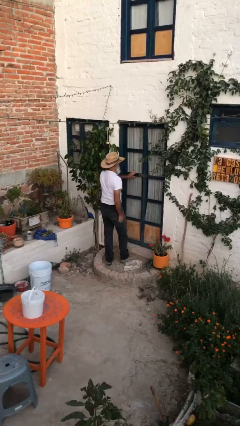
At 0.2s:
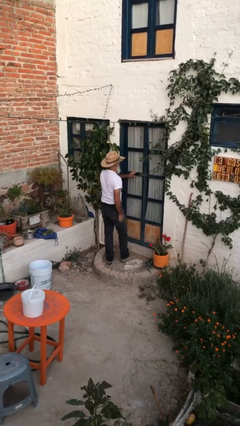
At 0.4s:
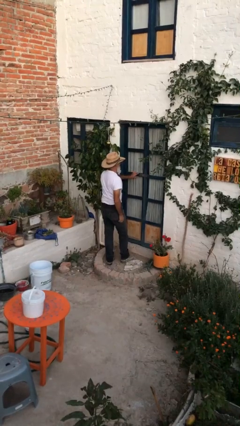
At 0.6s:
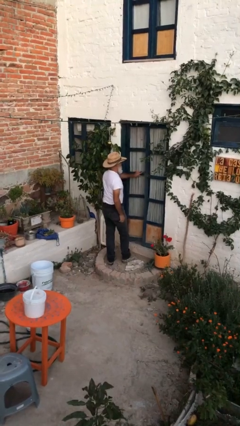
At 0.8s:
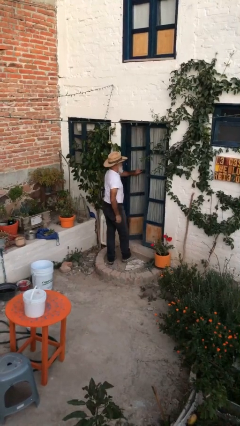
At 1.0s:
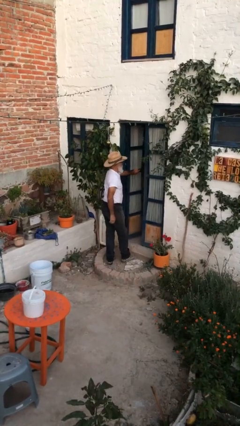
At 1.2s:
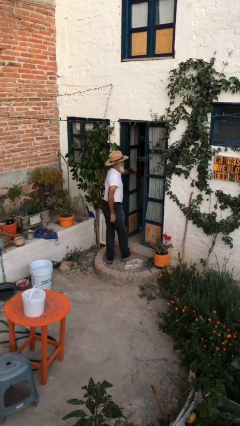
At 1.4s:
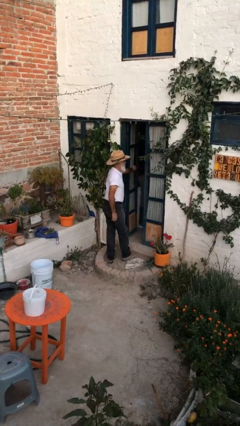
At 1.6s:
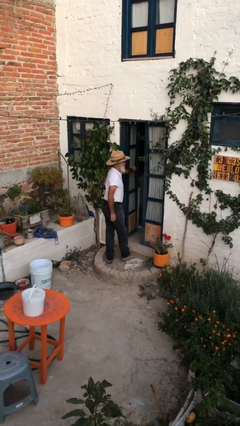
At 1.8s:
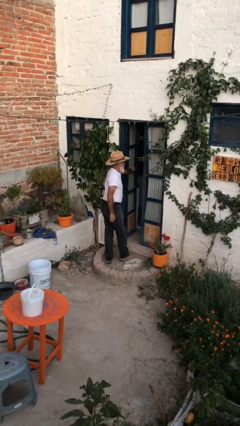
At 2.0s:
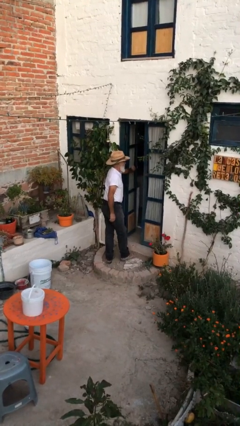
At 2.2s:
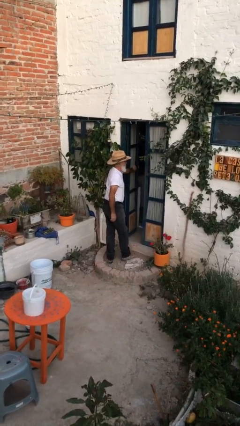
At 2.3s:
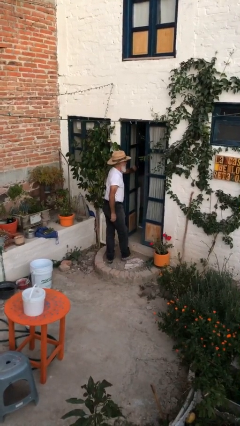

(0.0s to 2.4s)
person opens facility door

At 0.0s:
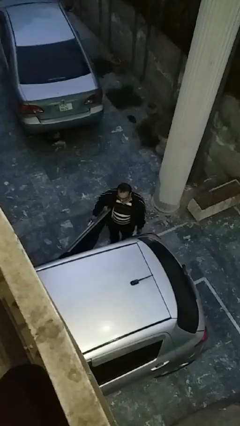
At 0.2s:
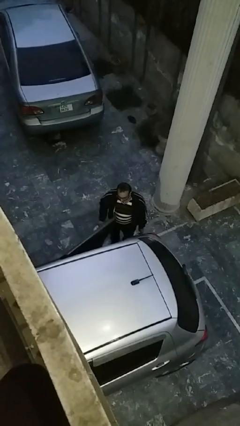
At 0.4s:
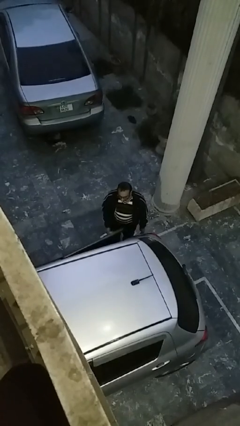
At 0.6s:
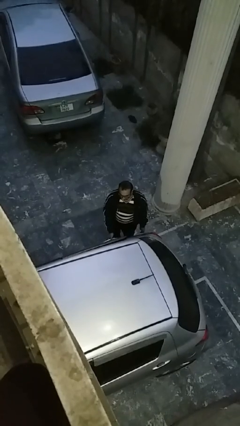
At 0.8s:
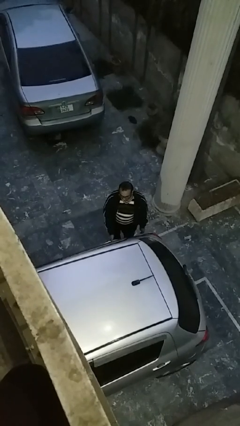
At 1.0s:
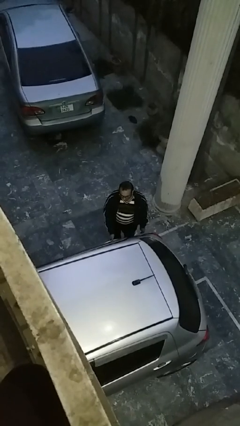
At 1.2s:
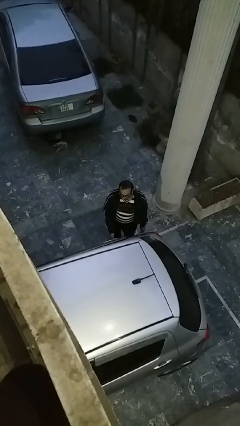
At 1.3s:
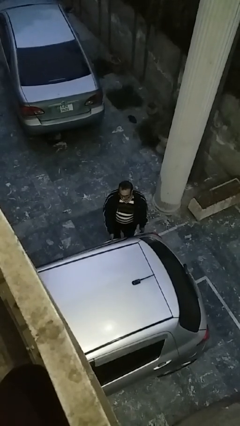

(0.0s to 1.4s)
person closes car door

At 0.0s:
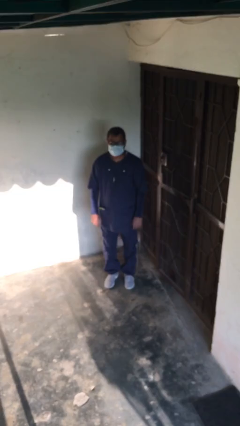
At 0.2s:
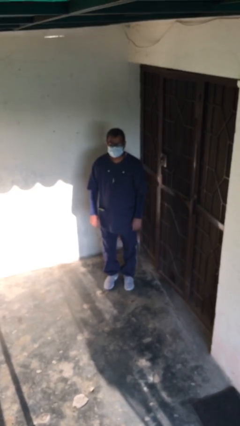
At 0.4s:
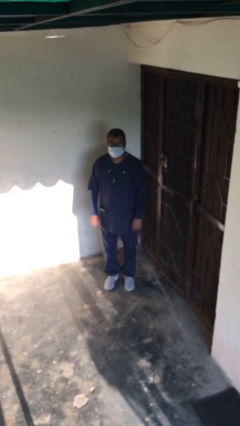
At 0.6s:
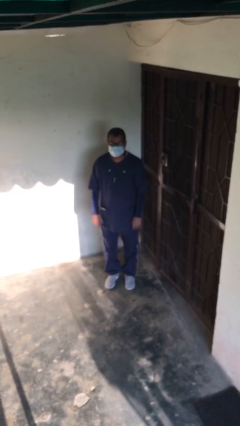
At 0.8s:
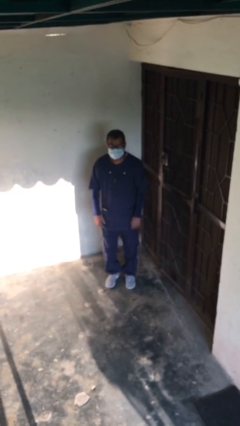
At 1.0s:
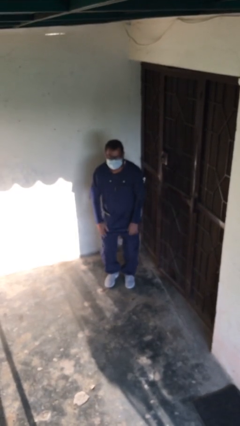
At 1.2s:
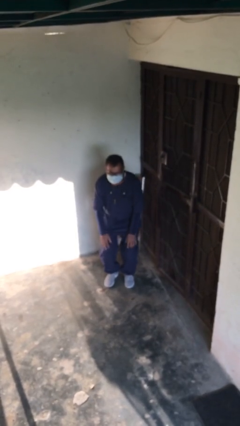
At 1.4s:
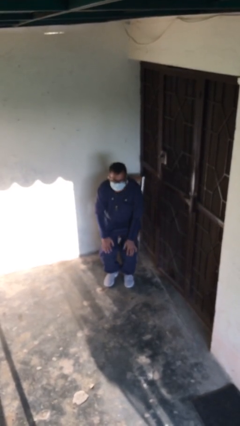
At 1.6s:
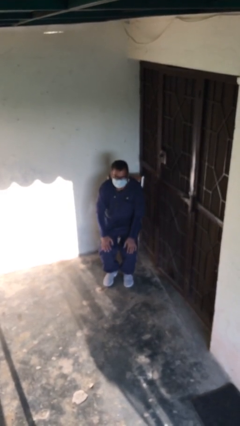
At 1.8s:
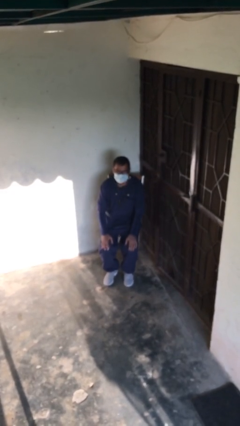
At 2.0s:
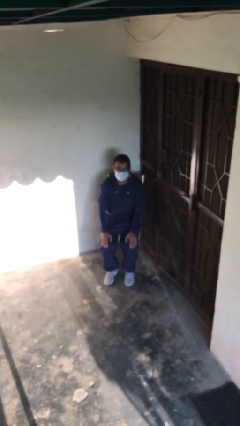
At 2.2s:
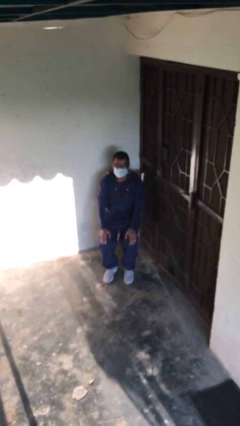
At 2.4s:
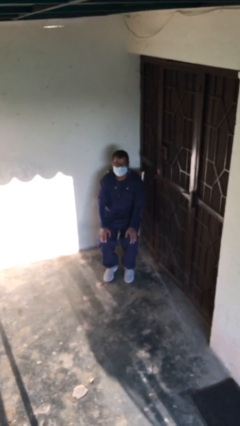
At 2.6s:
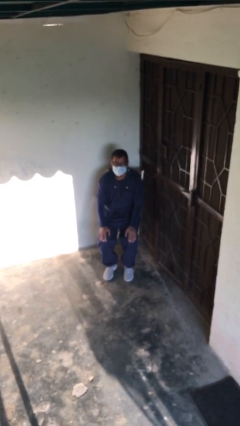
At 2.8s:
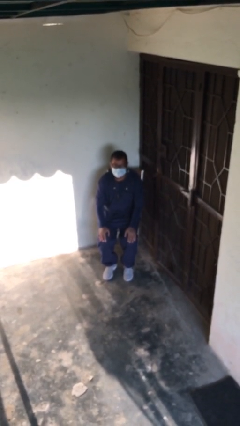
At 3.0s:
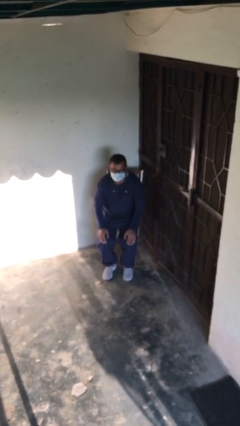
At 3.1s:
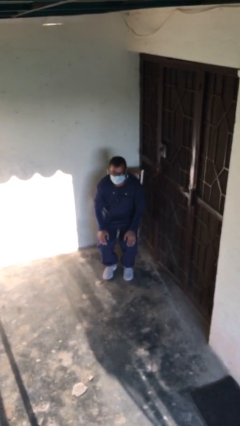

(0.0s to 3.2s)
person sits down

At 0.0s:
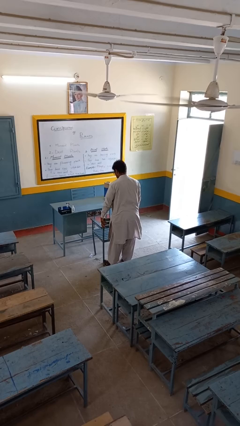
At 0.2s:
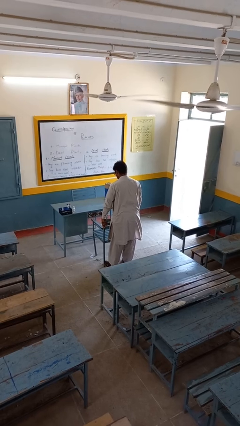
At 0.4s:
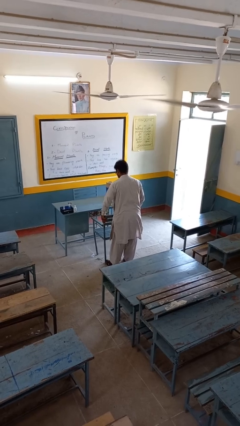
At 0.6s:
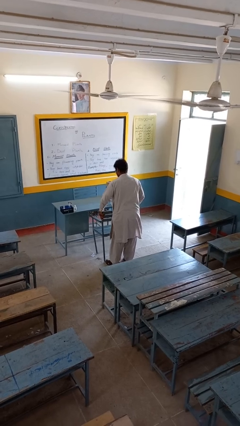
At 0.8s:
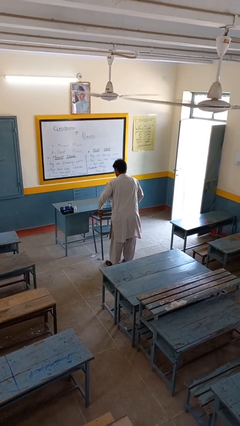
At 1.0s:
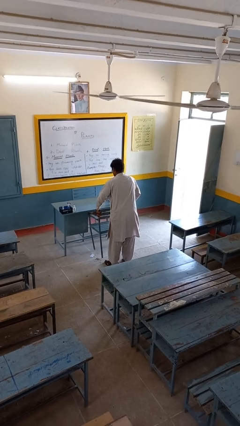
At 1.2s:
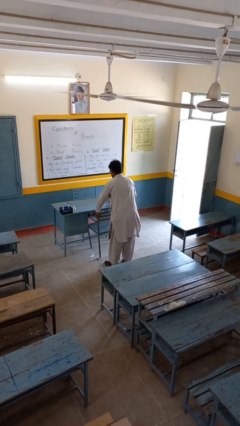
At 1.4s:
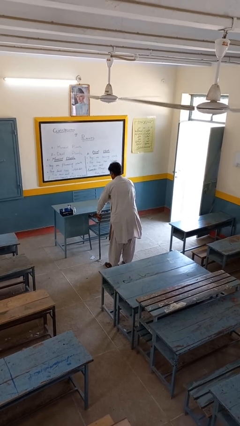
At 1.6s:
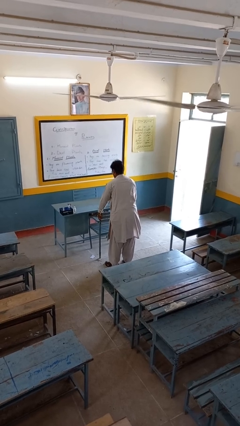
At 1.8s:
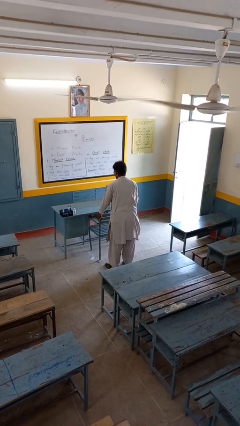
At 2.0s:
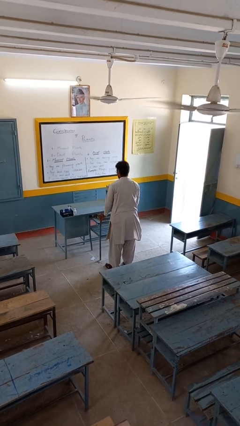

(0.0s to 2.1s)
person pushes in chair

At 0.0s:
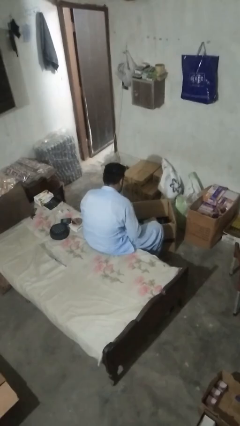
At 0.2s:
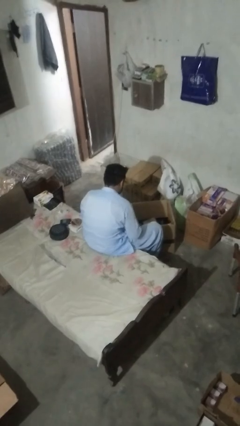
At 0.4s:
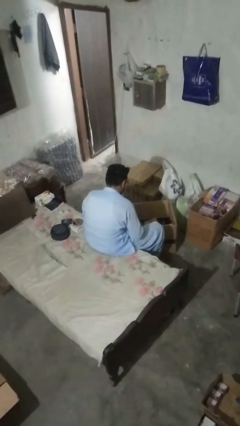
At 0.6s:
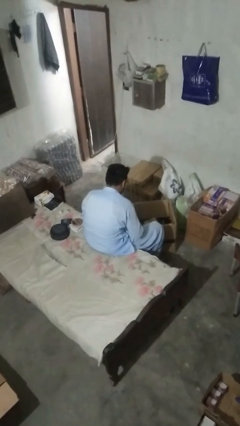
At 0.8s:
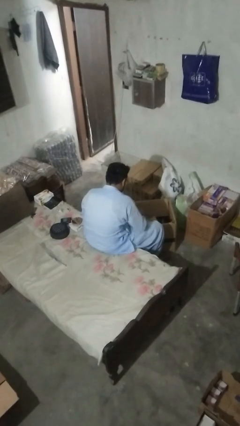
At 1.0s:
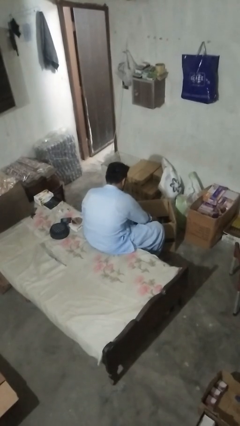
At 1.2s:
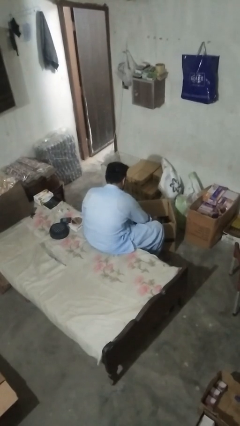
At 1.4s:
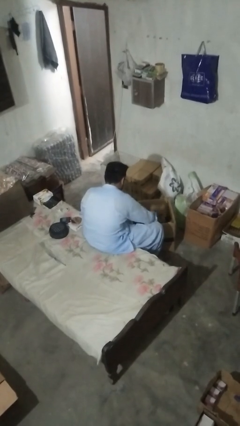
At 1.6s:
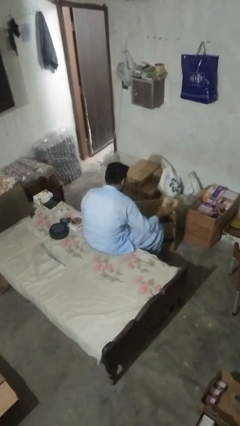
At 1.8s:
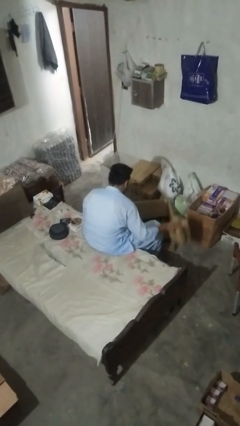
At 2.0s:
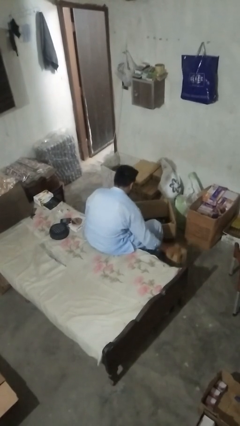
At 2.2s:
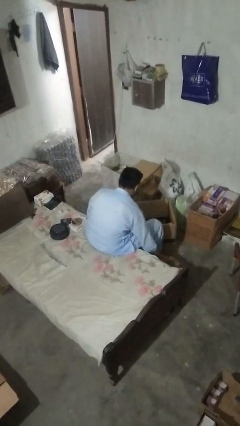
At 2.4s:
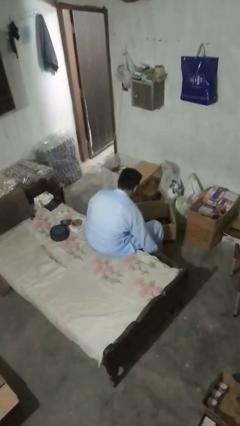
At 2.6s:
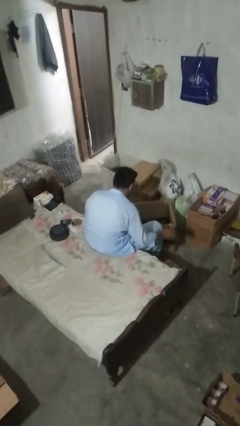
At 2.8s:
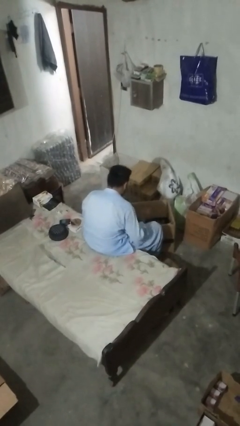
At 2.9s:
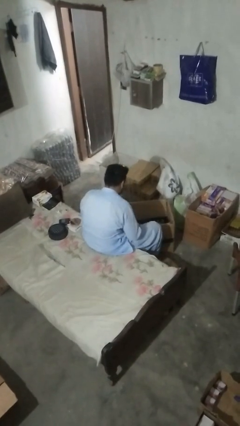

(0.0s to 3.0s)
person takes object from box

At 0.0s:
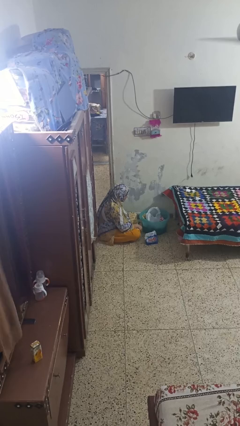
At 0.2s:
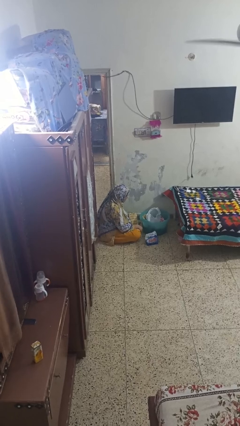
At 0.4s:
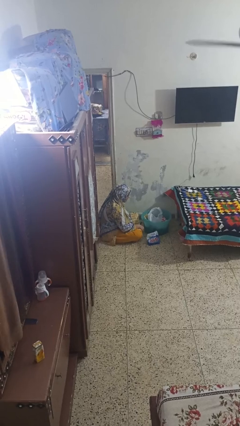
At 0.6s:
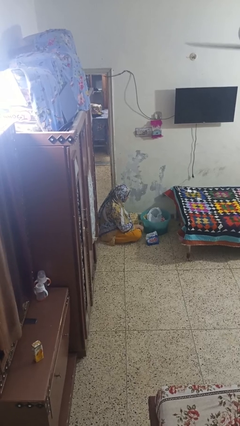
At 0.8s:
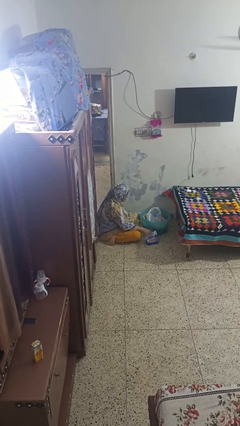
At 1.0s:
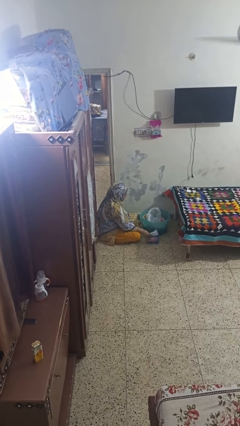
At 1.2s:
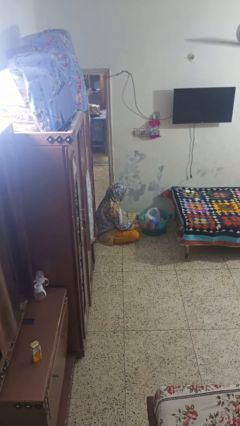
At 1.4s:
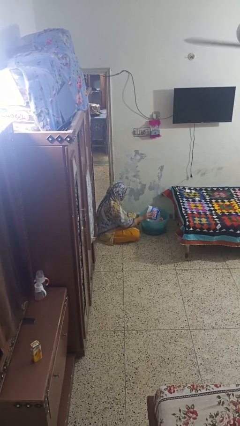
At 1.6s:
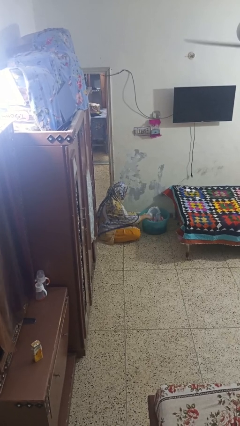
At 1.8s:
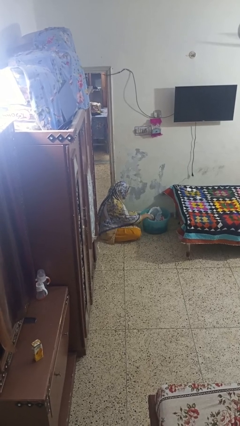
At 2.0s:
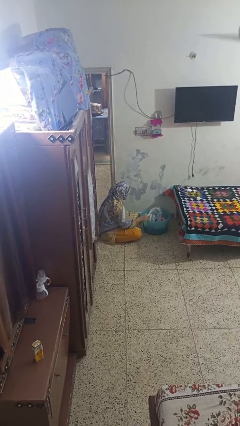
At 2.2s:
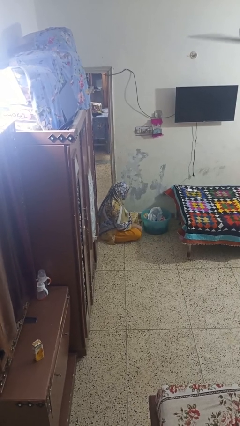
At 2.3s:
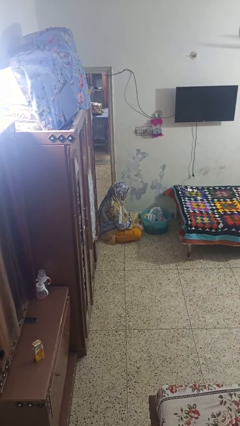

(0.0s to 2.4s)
person puts object into basket

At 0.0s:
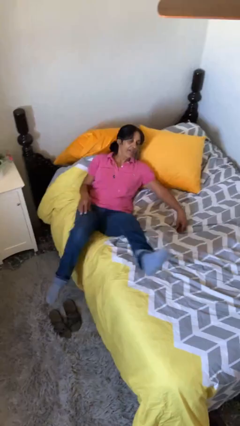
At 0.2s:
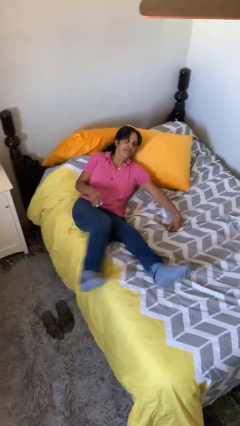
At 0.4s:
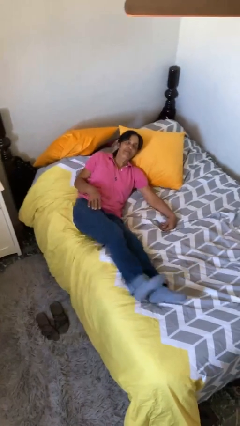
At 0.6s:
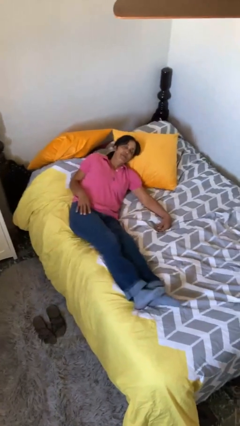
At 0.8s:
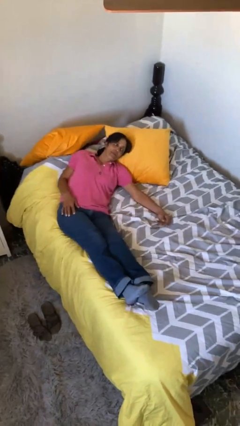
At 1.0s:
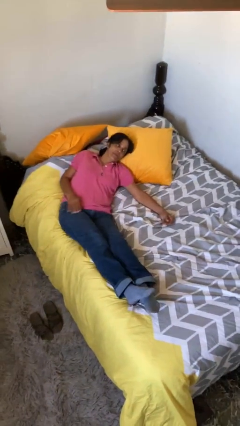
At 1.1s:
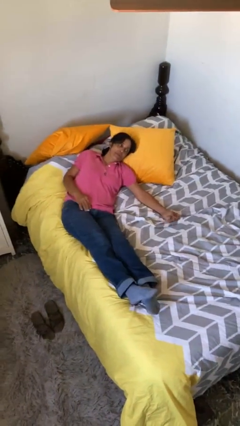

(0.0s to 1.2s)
person lies down on bed

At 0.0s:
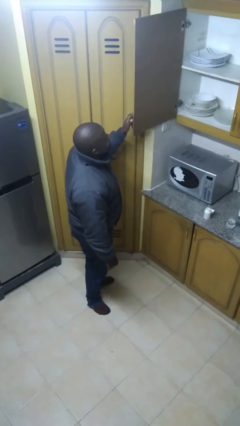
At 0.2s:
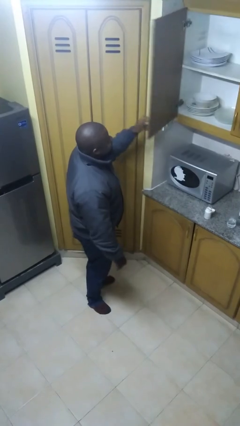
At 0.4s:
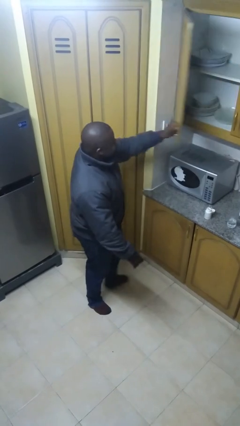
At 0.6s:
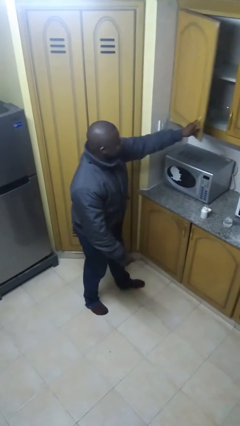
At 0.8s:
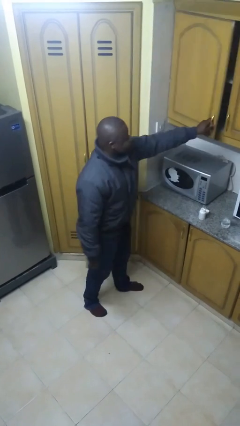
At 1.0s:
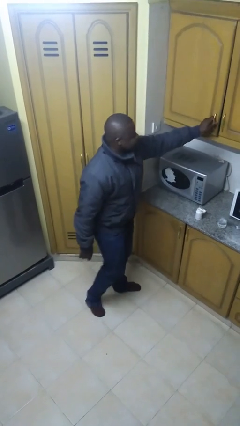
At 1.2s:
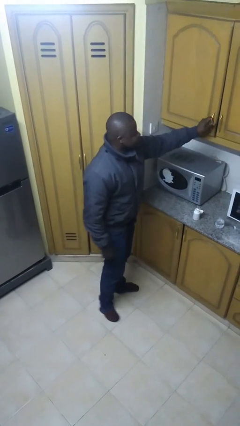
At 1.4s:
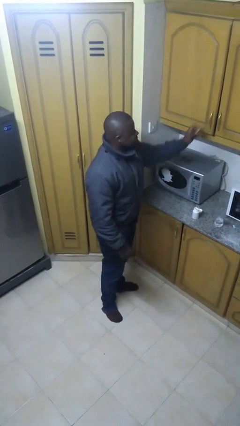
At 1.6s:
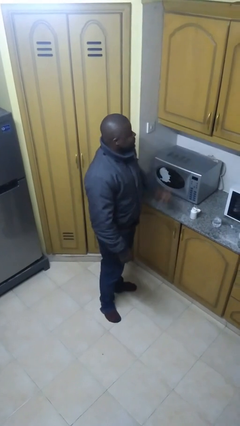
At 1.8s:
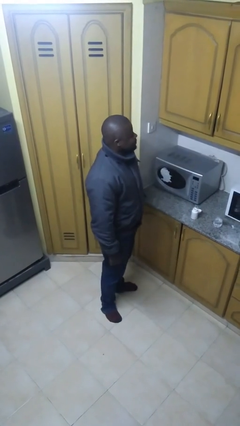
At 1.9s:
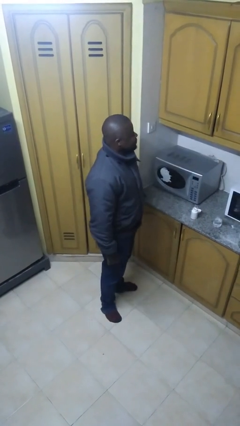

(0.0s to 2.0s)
person closes cabinet
